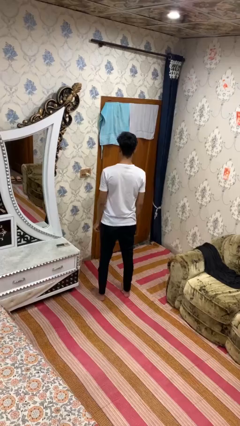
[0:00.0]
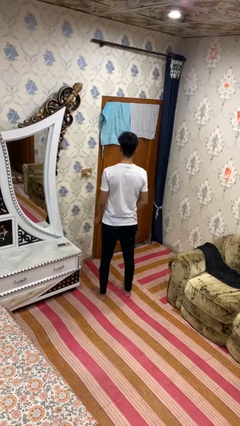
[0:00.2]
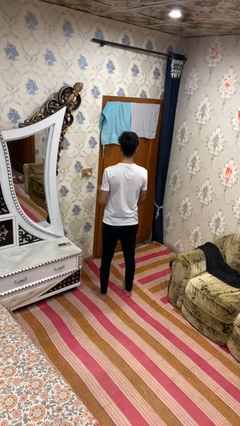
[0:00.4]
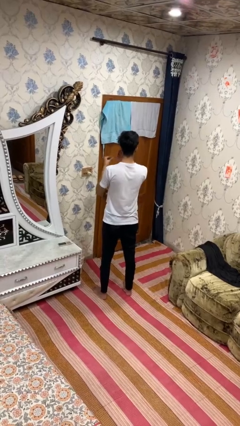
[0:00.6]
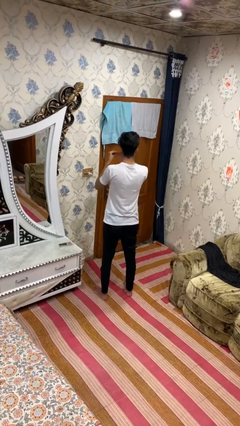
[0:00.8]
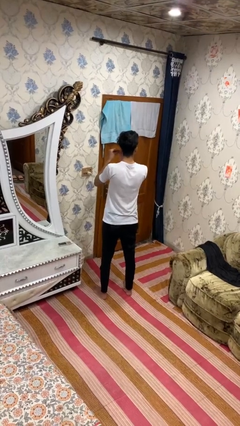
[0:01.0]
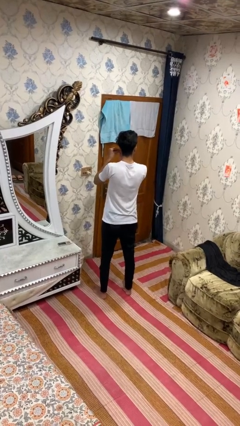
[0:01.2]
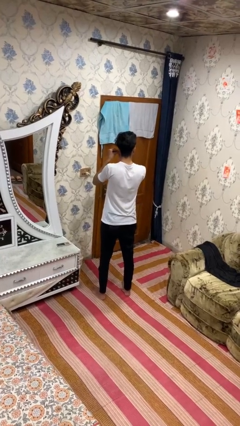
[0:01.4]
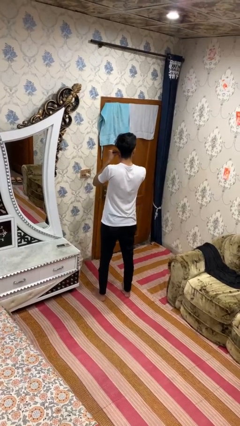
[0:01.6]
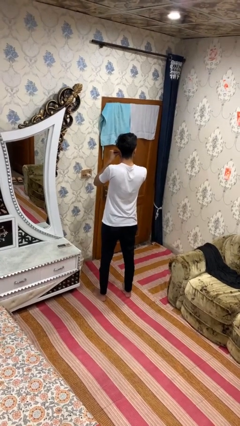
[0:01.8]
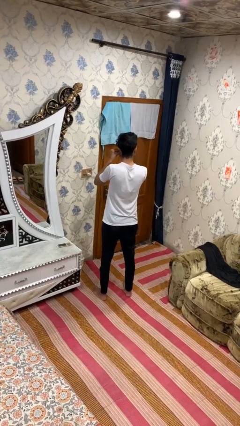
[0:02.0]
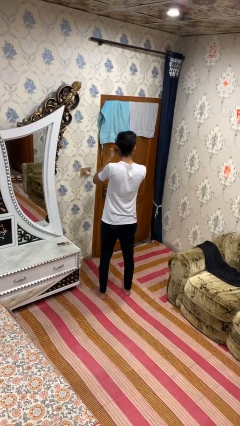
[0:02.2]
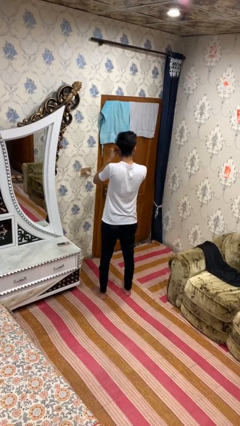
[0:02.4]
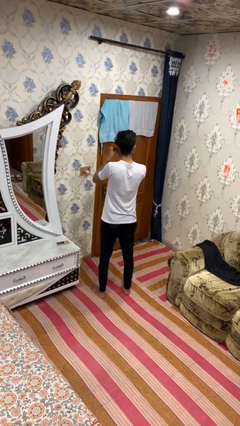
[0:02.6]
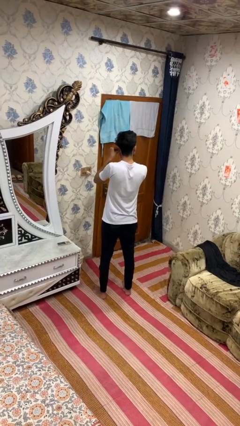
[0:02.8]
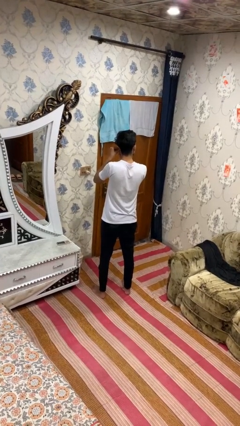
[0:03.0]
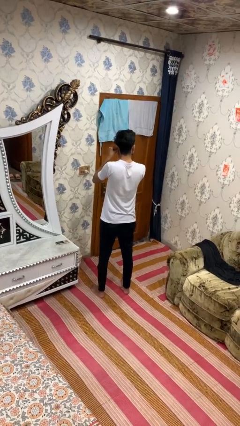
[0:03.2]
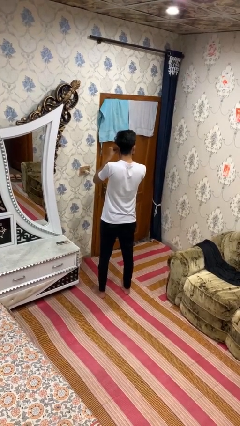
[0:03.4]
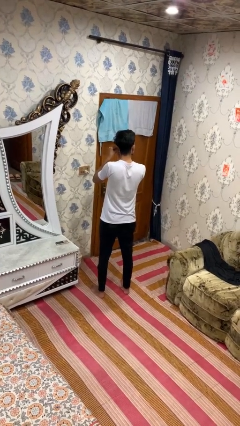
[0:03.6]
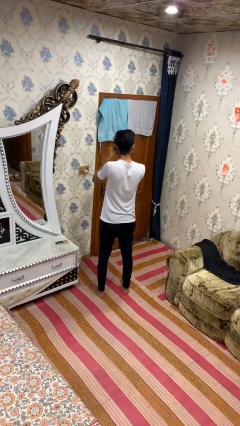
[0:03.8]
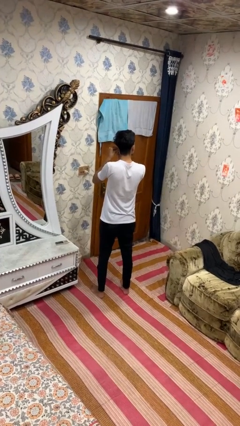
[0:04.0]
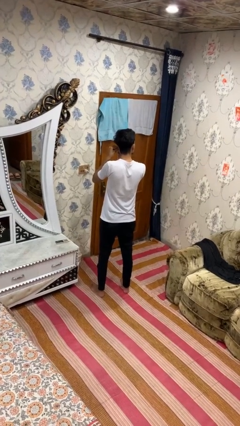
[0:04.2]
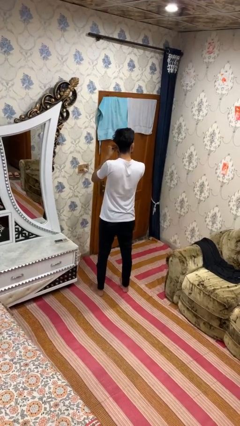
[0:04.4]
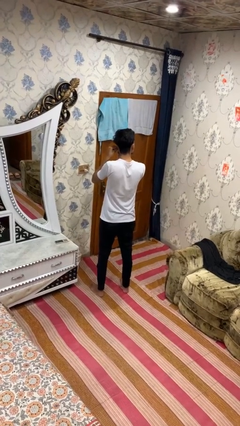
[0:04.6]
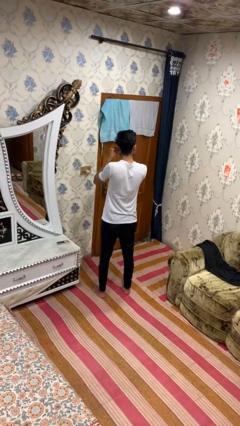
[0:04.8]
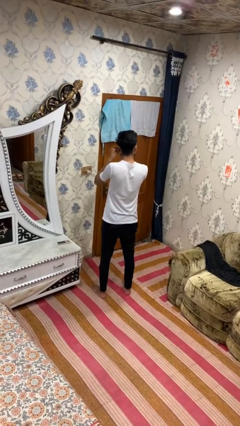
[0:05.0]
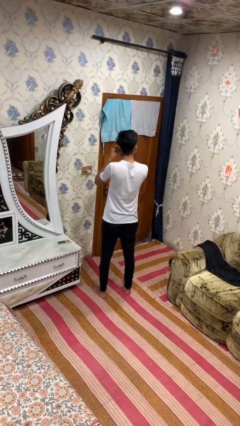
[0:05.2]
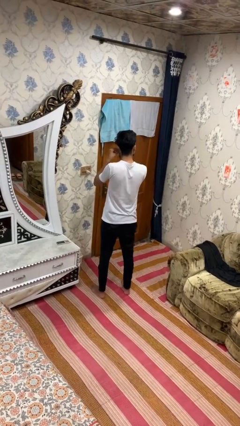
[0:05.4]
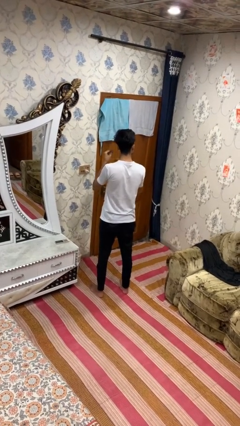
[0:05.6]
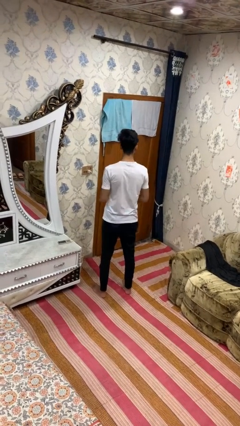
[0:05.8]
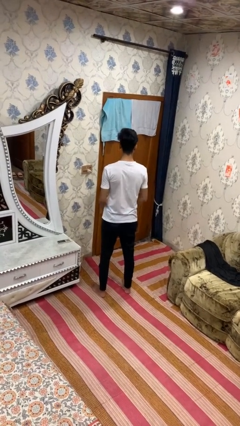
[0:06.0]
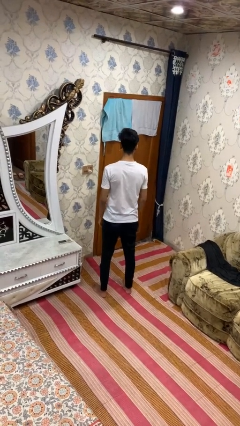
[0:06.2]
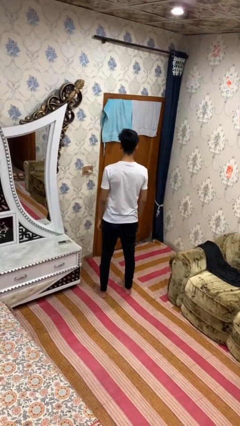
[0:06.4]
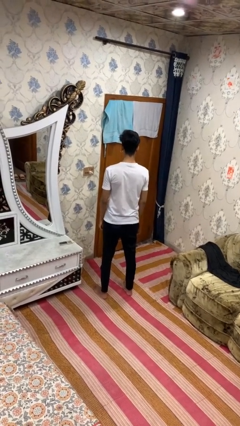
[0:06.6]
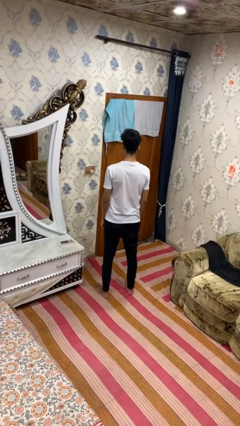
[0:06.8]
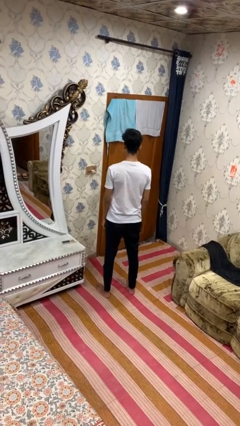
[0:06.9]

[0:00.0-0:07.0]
person puts on earrings

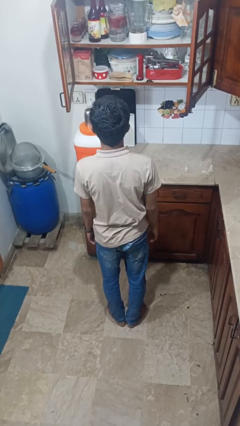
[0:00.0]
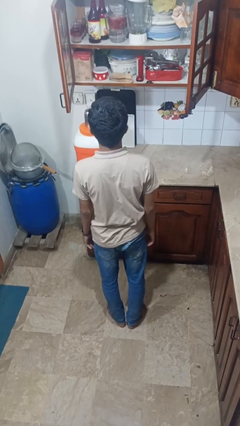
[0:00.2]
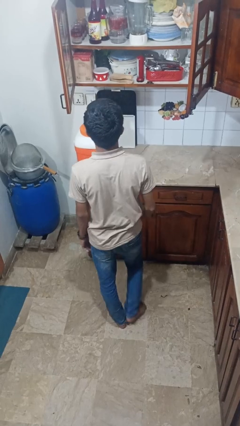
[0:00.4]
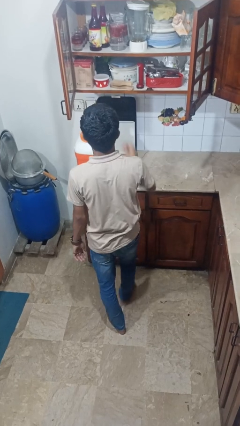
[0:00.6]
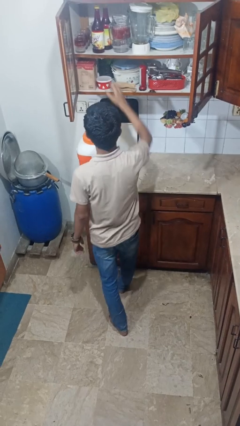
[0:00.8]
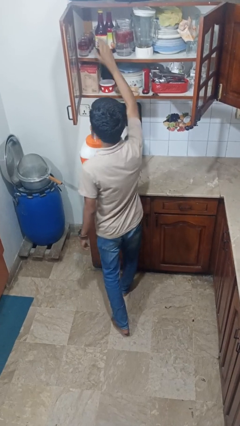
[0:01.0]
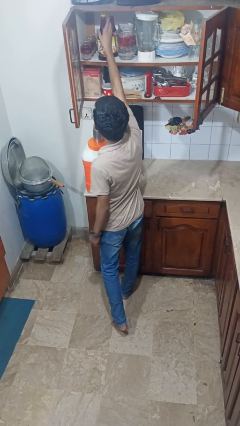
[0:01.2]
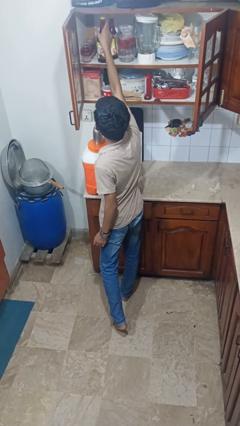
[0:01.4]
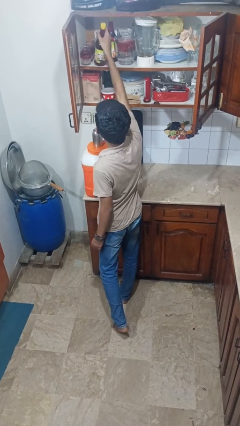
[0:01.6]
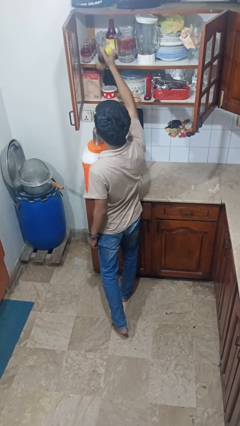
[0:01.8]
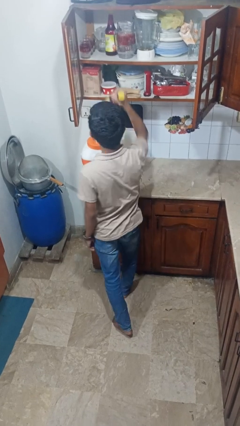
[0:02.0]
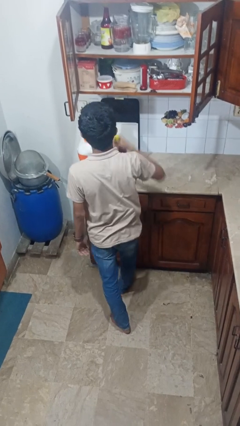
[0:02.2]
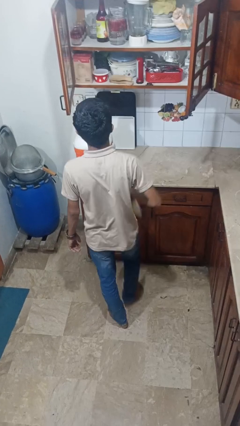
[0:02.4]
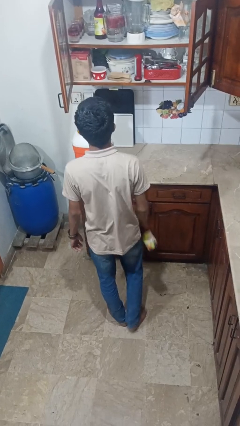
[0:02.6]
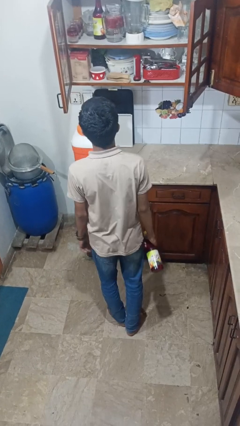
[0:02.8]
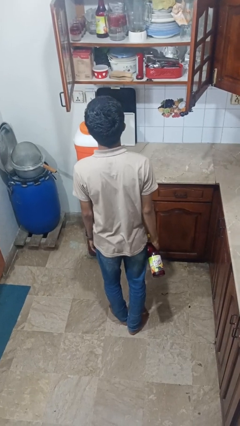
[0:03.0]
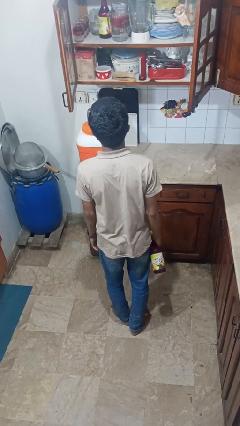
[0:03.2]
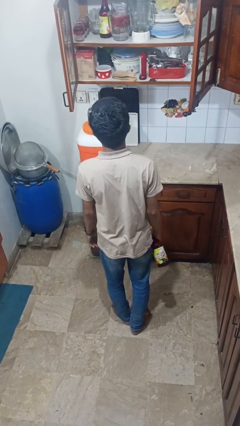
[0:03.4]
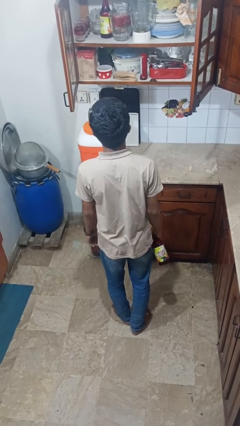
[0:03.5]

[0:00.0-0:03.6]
person picks up object from cabinet

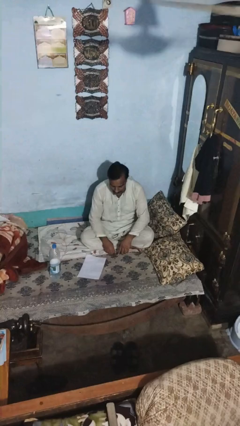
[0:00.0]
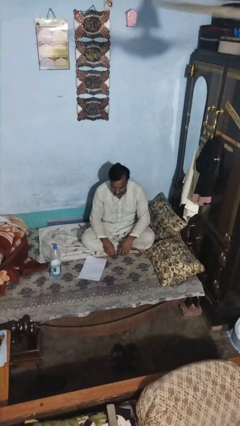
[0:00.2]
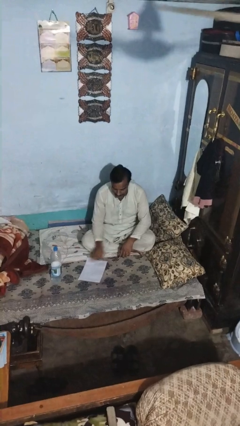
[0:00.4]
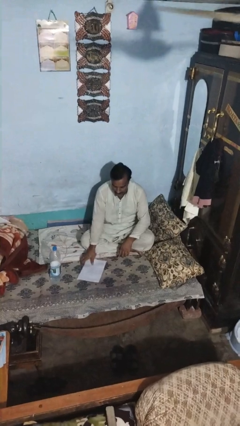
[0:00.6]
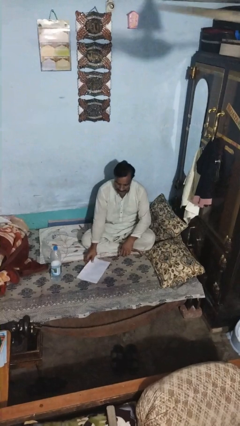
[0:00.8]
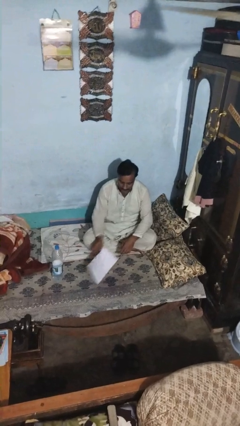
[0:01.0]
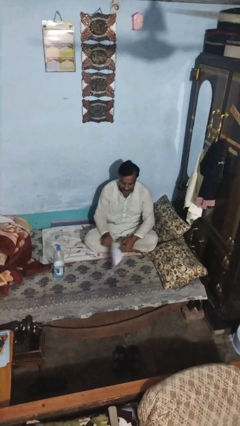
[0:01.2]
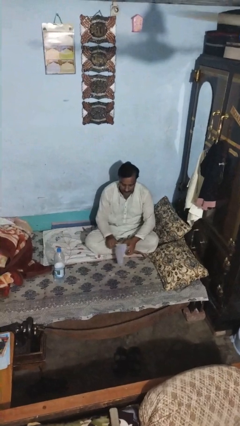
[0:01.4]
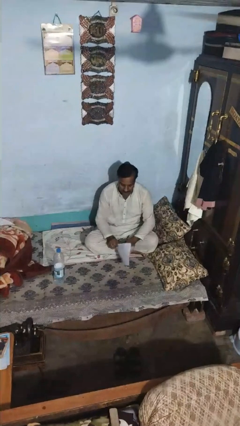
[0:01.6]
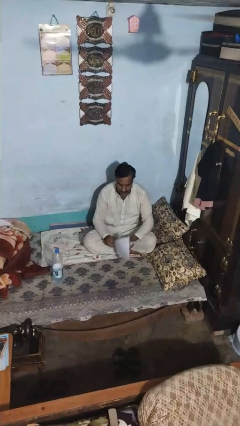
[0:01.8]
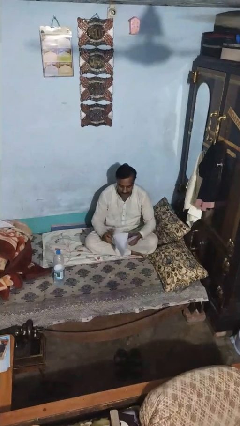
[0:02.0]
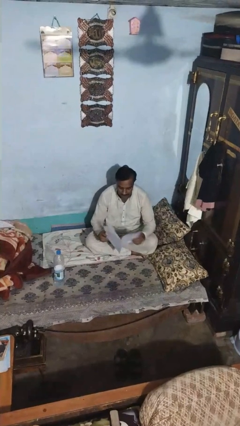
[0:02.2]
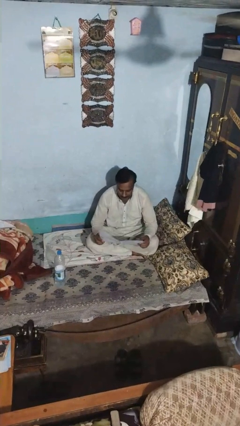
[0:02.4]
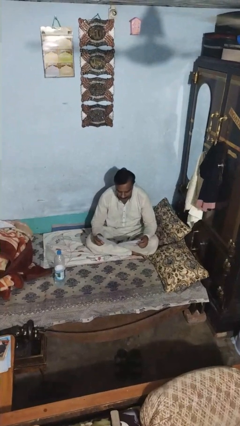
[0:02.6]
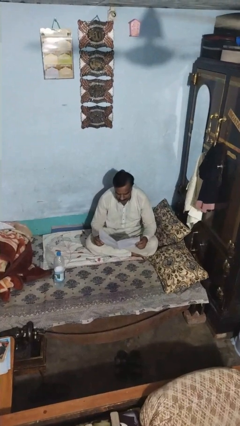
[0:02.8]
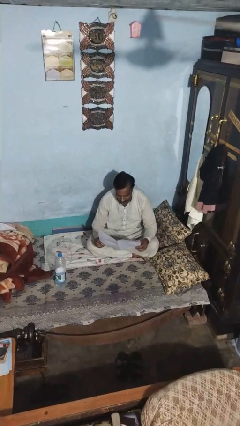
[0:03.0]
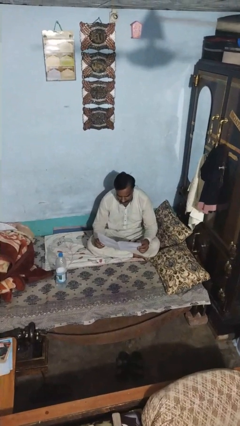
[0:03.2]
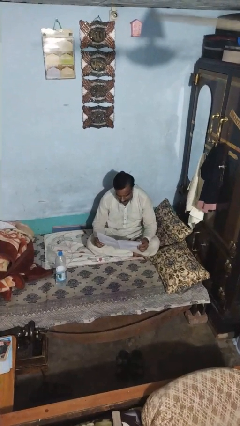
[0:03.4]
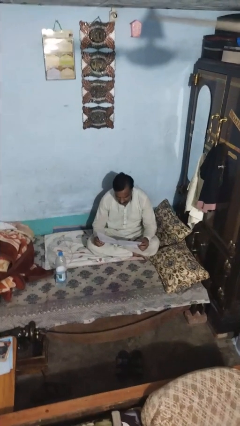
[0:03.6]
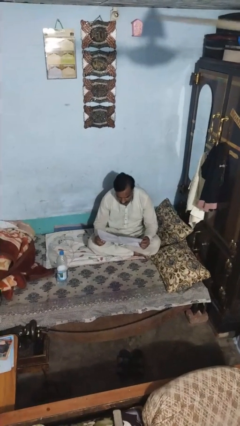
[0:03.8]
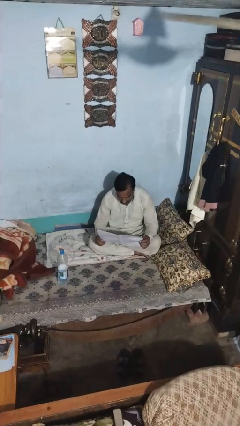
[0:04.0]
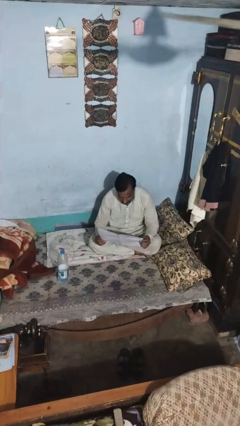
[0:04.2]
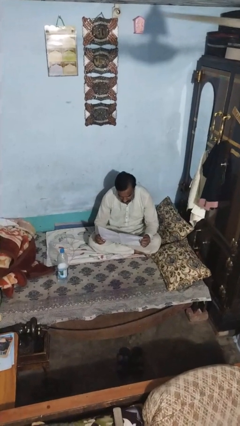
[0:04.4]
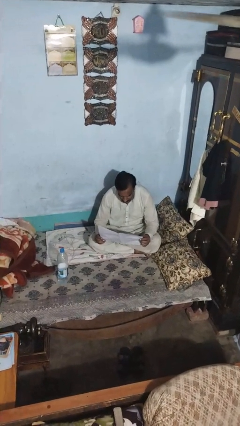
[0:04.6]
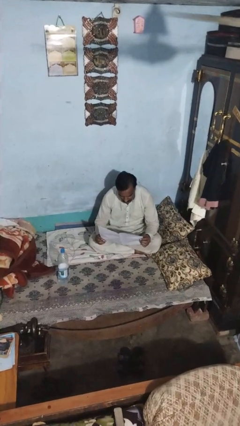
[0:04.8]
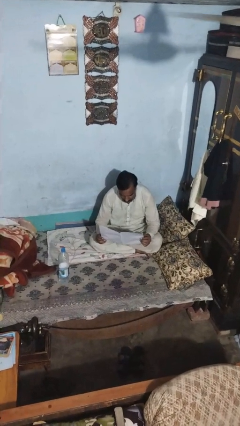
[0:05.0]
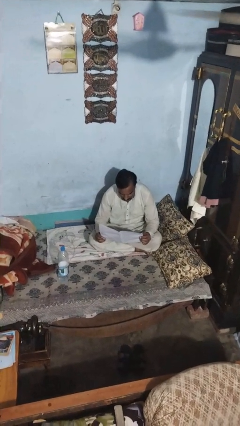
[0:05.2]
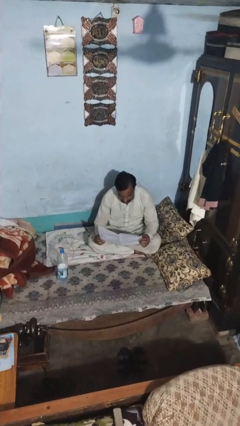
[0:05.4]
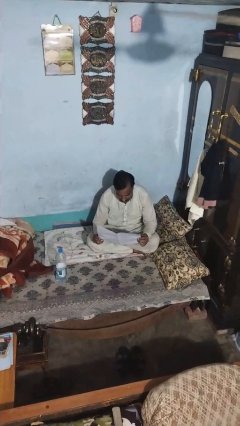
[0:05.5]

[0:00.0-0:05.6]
person reads newspaper

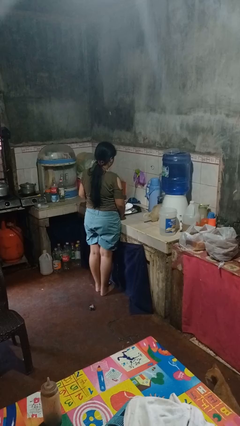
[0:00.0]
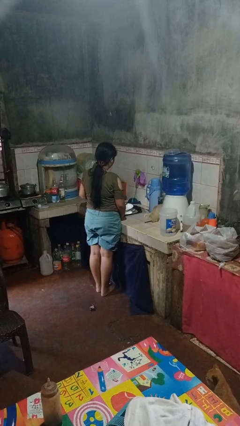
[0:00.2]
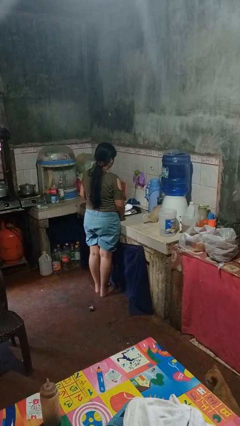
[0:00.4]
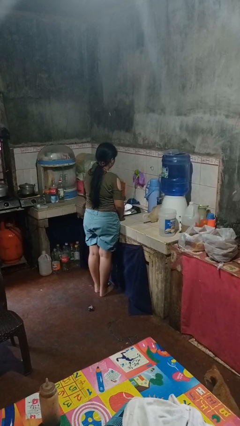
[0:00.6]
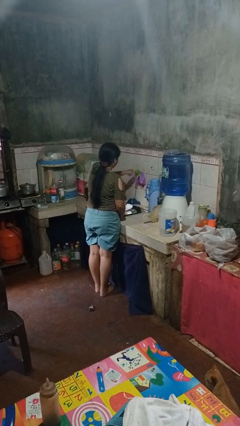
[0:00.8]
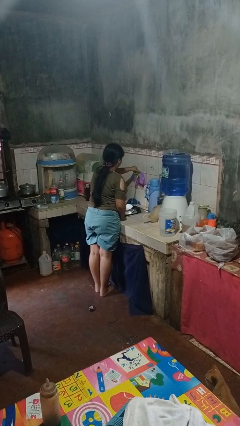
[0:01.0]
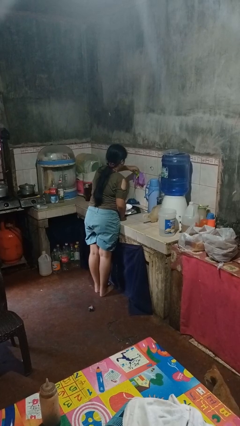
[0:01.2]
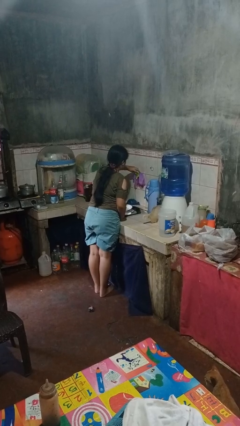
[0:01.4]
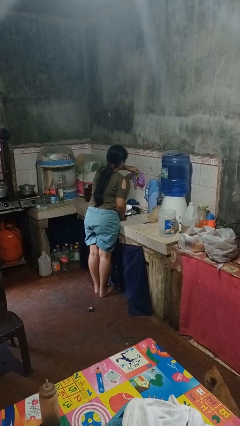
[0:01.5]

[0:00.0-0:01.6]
person turns off faucet
